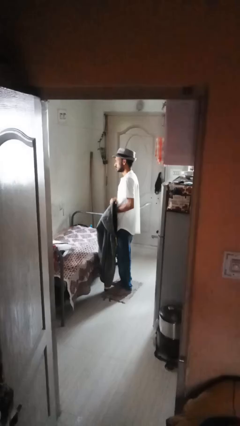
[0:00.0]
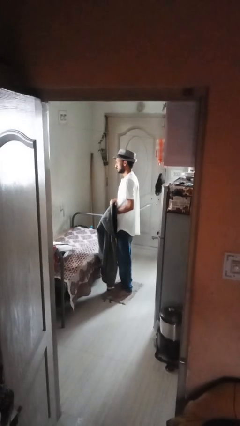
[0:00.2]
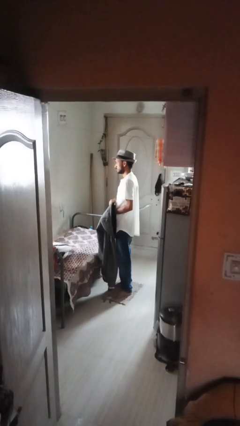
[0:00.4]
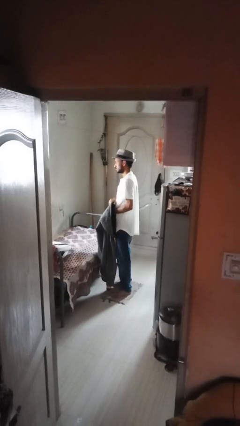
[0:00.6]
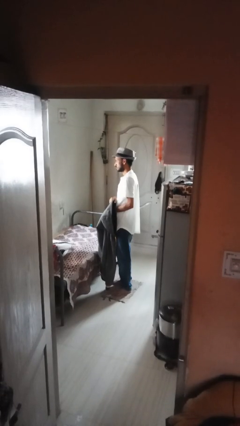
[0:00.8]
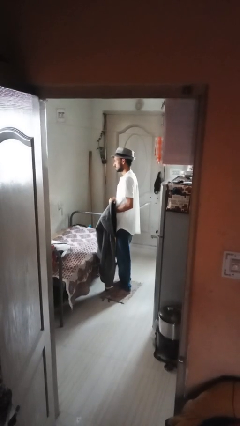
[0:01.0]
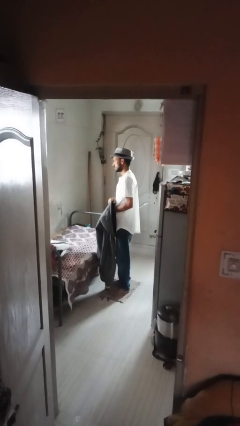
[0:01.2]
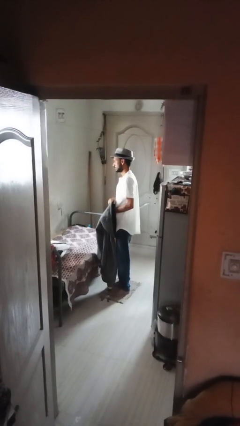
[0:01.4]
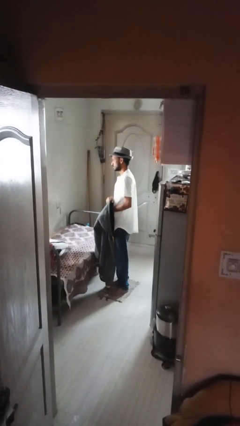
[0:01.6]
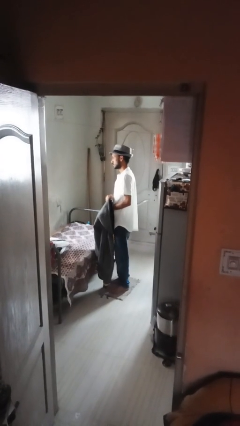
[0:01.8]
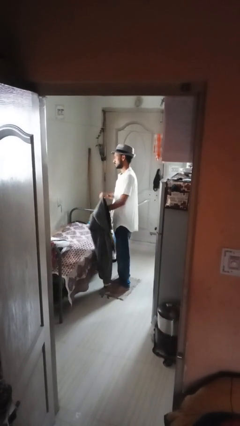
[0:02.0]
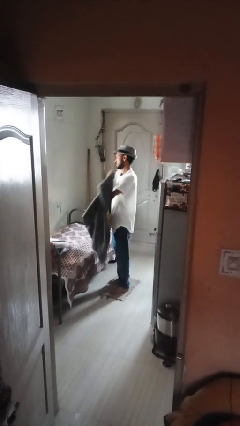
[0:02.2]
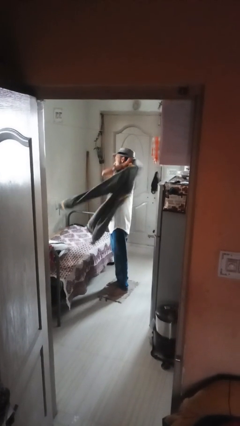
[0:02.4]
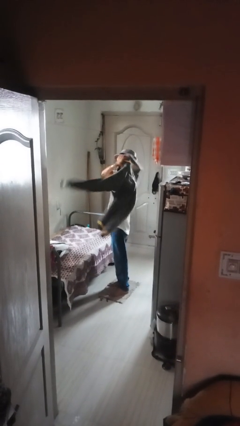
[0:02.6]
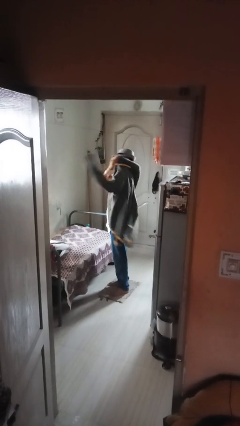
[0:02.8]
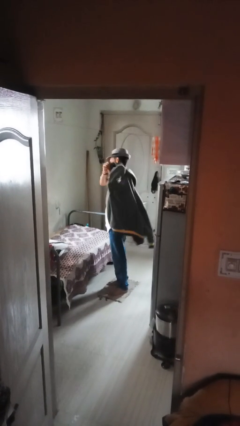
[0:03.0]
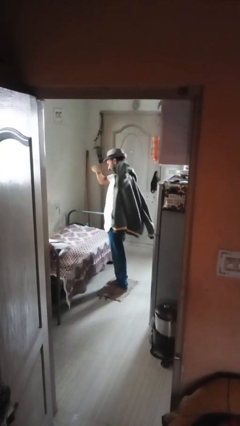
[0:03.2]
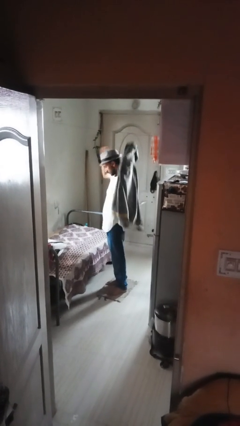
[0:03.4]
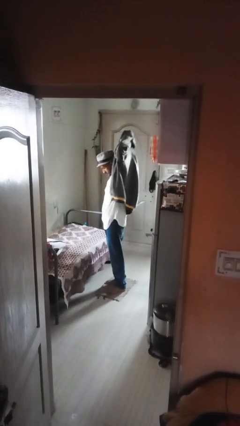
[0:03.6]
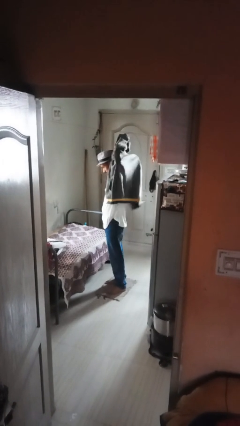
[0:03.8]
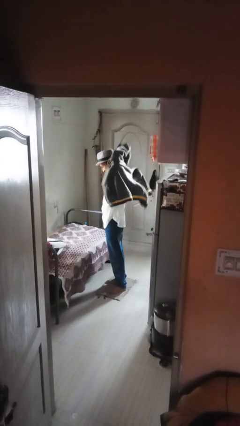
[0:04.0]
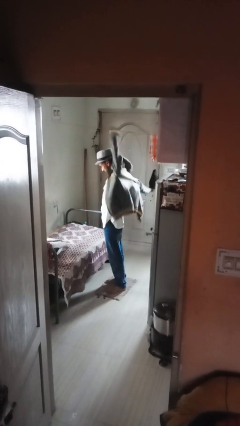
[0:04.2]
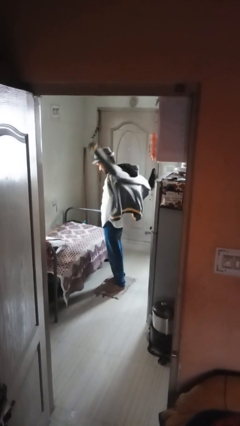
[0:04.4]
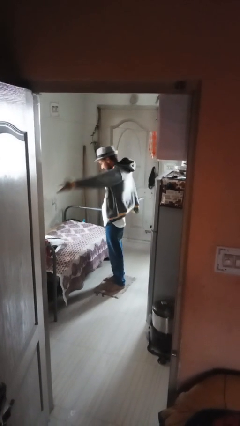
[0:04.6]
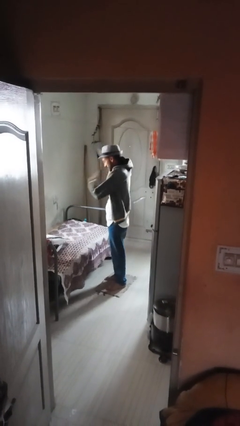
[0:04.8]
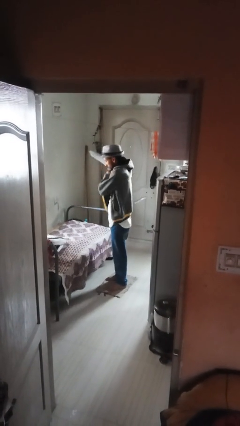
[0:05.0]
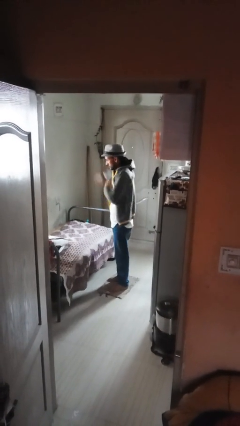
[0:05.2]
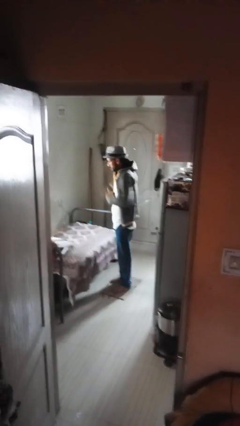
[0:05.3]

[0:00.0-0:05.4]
person puts on jacket

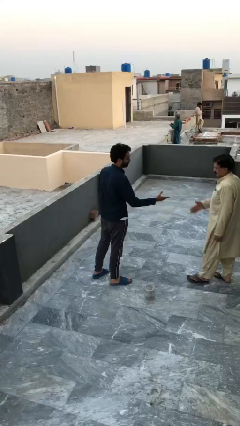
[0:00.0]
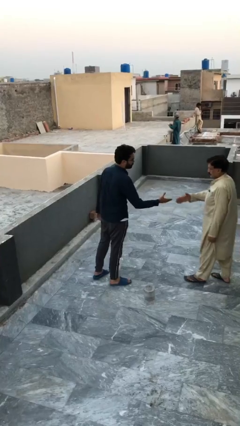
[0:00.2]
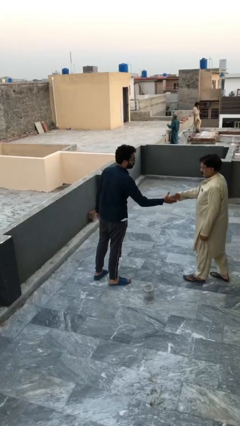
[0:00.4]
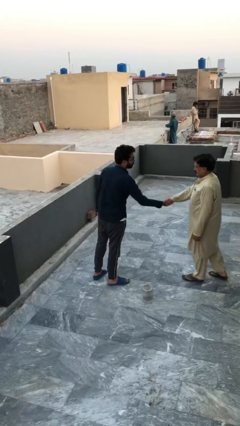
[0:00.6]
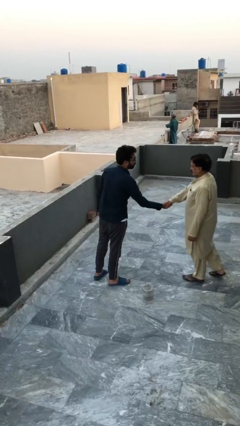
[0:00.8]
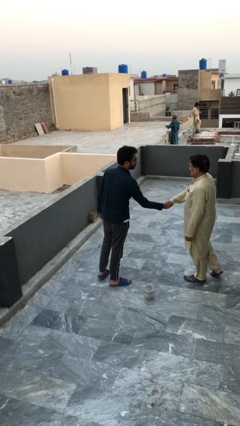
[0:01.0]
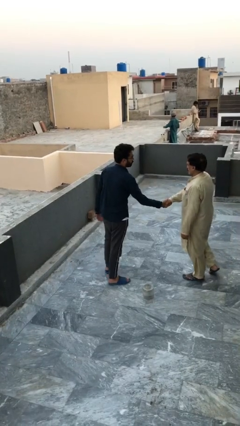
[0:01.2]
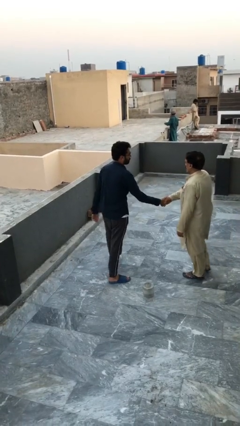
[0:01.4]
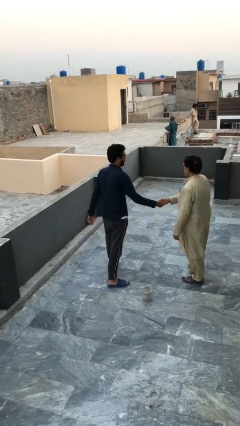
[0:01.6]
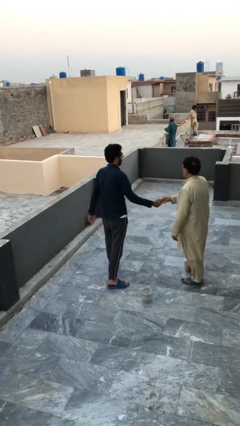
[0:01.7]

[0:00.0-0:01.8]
person shakes hand

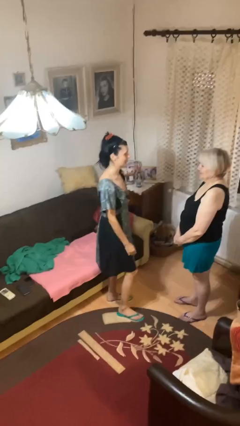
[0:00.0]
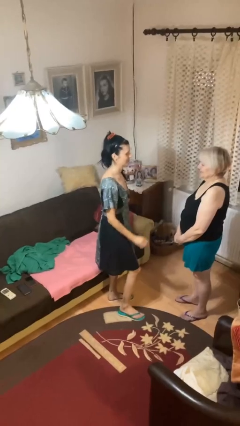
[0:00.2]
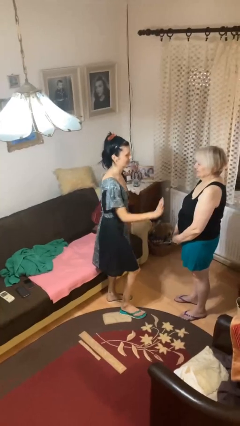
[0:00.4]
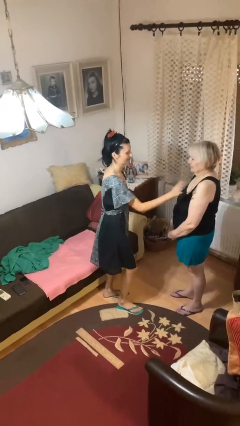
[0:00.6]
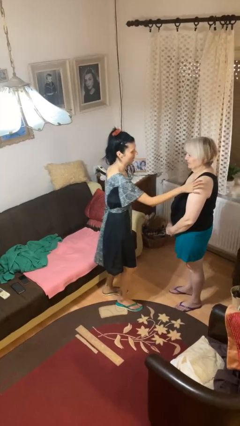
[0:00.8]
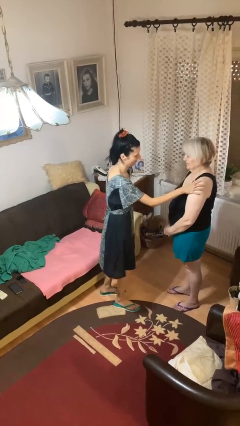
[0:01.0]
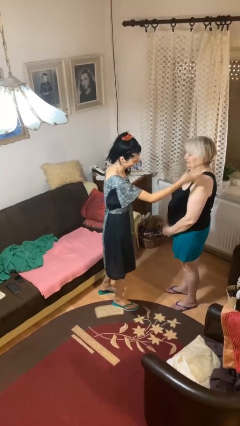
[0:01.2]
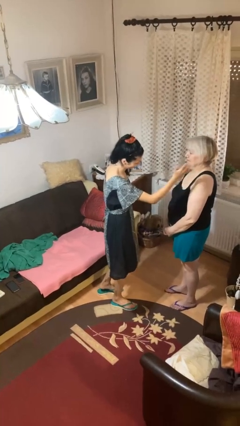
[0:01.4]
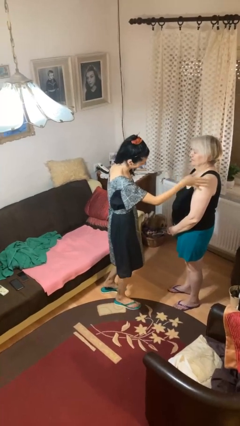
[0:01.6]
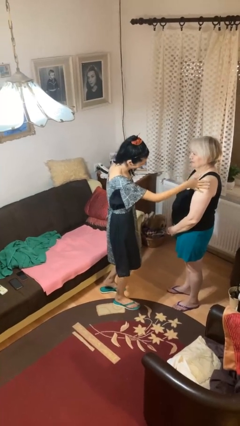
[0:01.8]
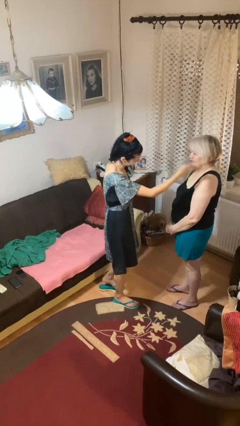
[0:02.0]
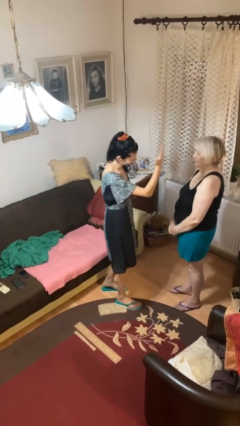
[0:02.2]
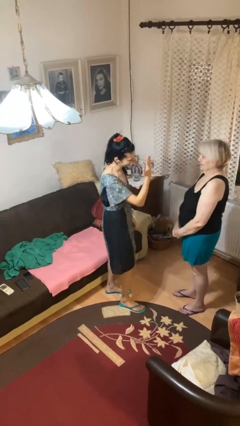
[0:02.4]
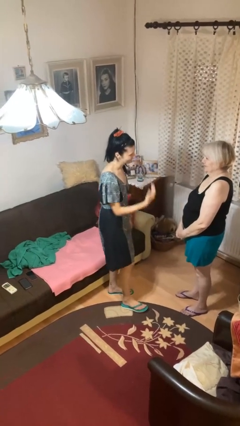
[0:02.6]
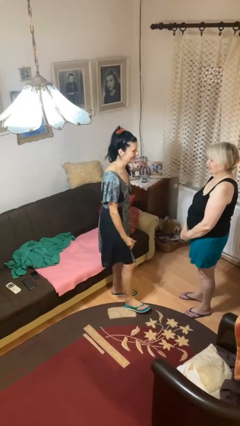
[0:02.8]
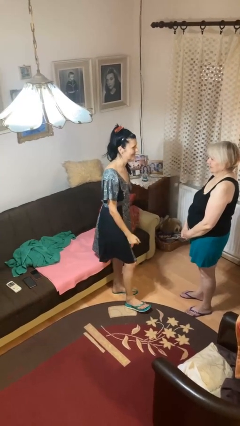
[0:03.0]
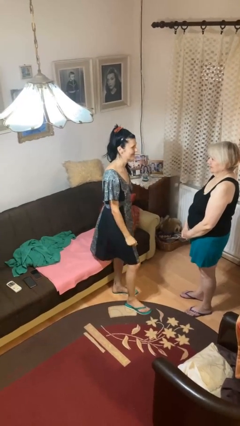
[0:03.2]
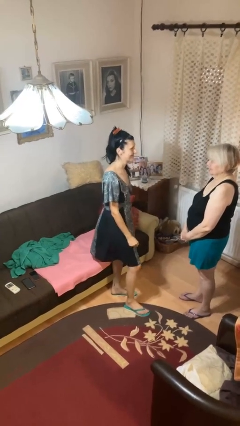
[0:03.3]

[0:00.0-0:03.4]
person shoves person

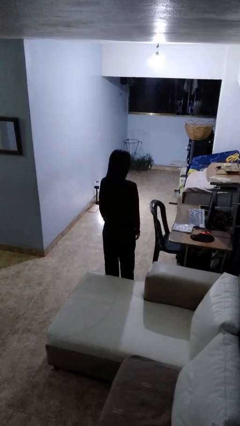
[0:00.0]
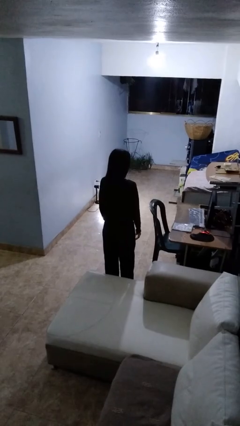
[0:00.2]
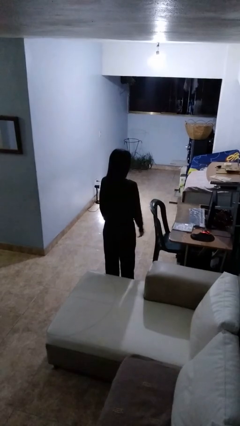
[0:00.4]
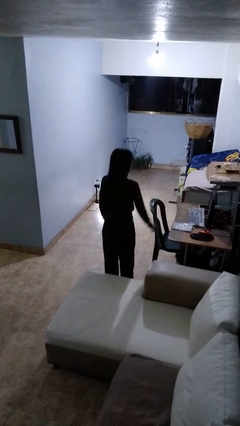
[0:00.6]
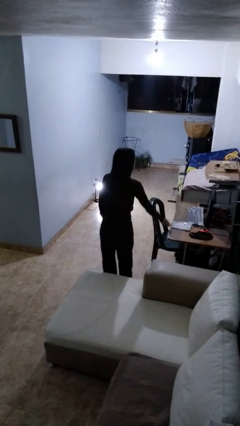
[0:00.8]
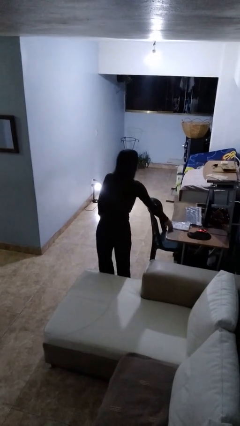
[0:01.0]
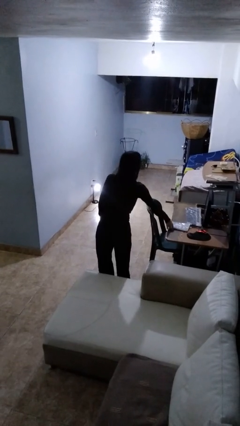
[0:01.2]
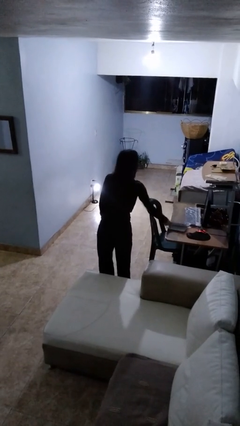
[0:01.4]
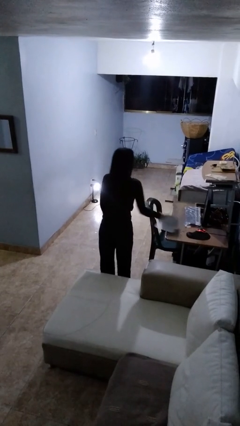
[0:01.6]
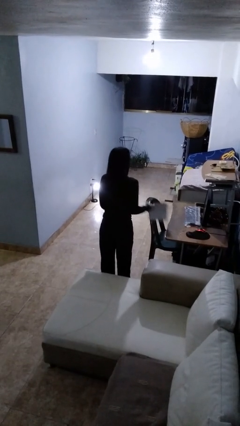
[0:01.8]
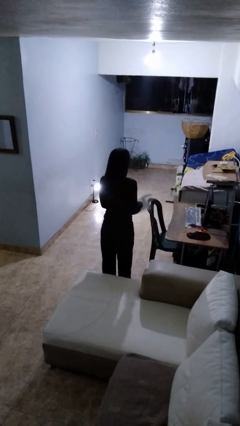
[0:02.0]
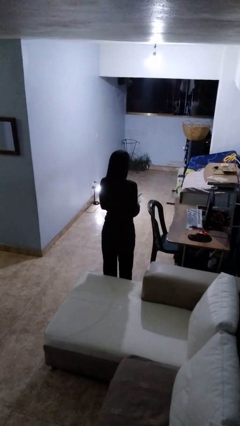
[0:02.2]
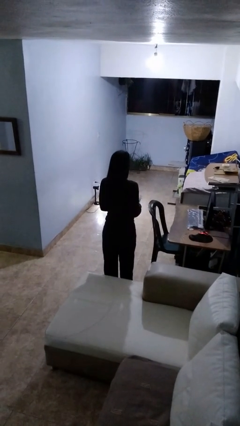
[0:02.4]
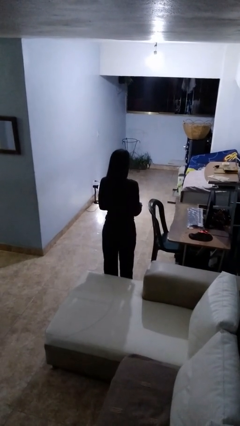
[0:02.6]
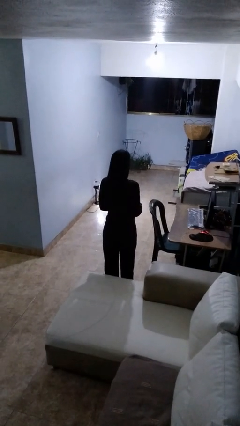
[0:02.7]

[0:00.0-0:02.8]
person picks up object from table

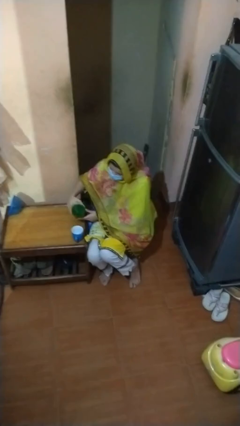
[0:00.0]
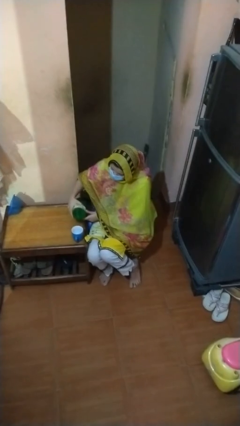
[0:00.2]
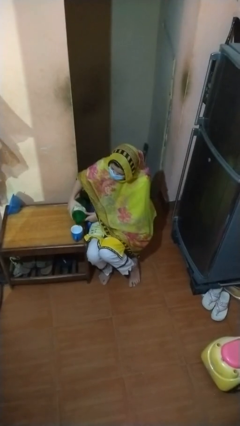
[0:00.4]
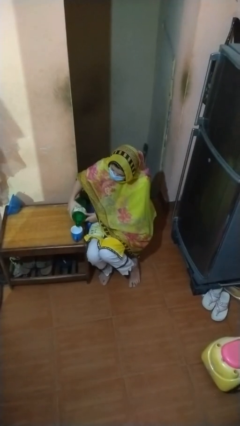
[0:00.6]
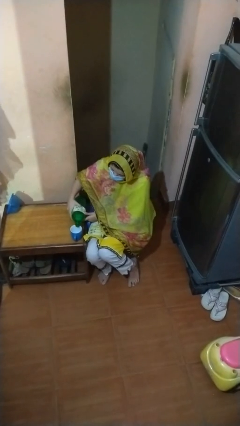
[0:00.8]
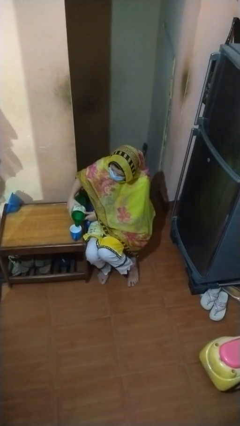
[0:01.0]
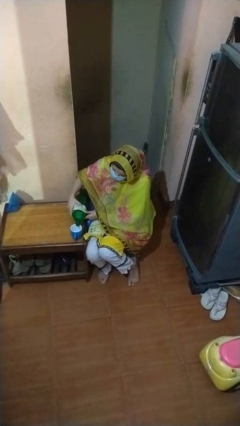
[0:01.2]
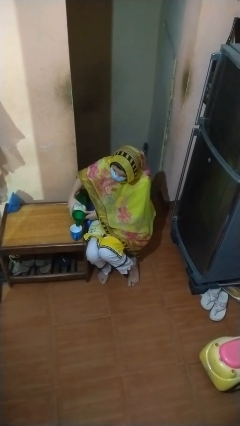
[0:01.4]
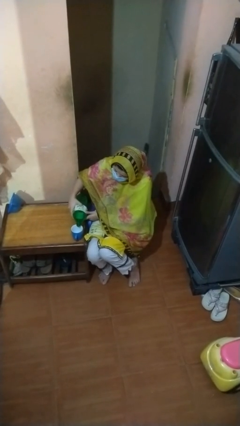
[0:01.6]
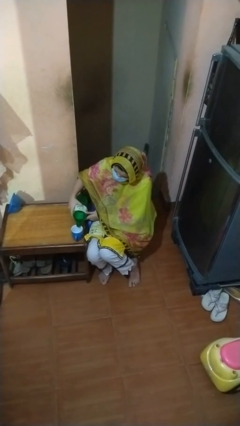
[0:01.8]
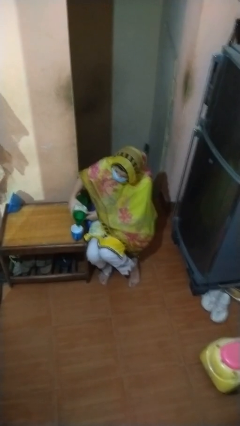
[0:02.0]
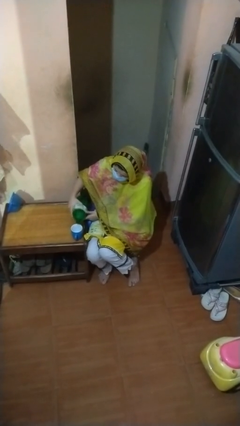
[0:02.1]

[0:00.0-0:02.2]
person pours liquid into cup

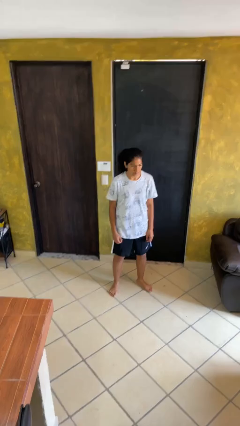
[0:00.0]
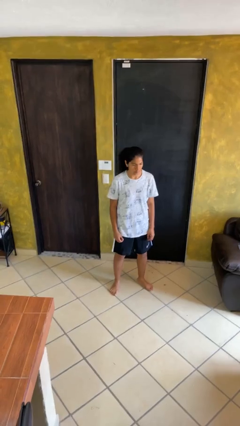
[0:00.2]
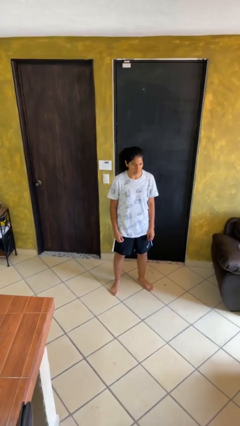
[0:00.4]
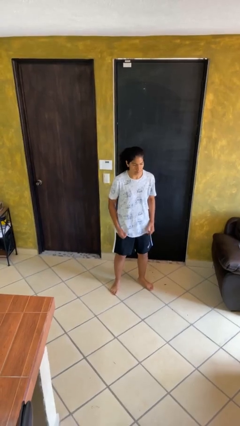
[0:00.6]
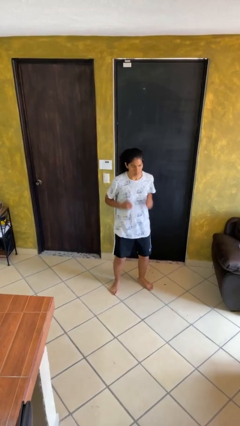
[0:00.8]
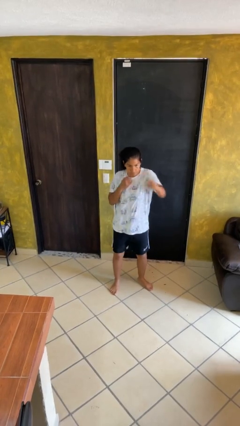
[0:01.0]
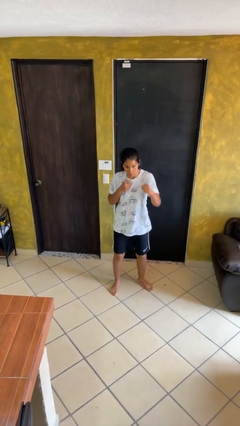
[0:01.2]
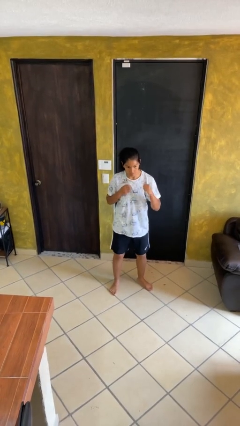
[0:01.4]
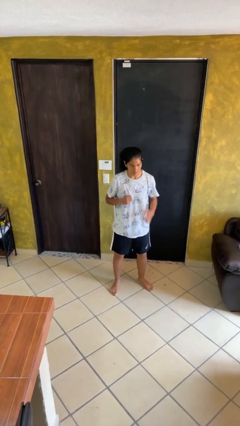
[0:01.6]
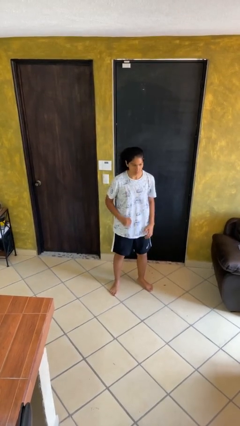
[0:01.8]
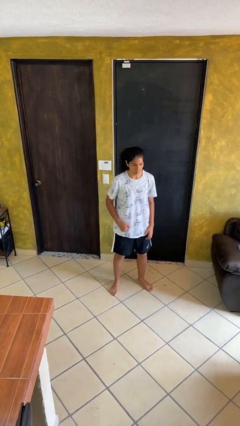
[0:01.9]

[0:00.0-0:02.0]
person punches
